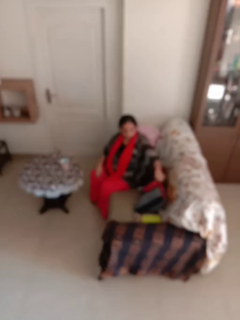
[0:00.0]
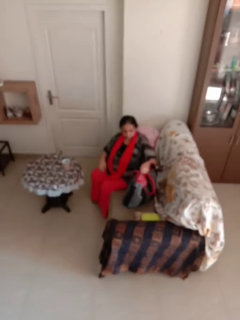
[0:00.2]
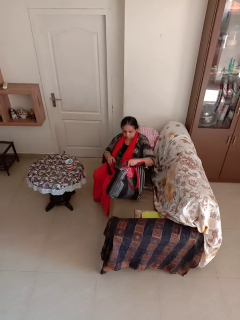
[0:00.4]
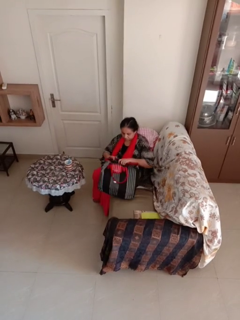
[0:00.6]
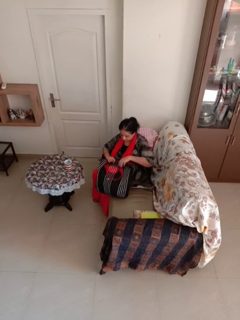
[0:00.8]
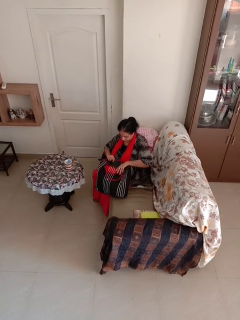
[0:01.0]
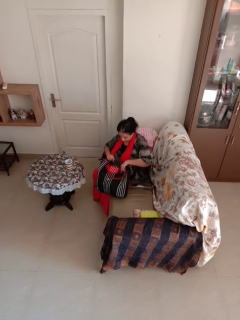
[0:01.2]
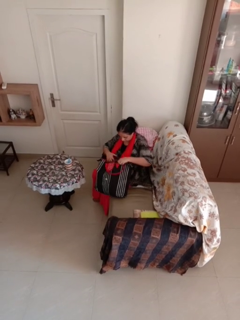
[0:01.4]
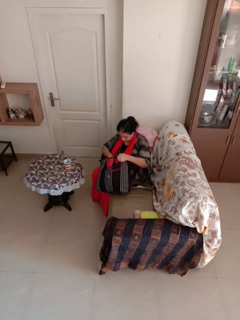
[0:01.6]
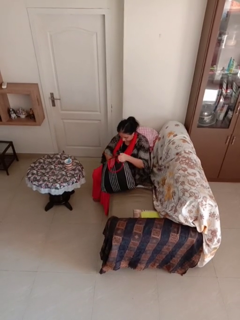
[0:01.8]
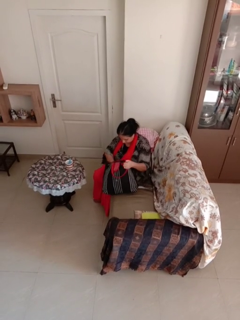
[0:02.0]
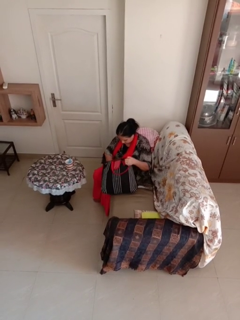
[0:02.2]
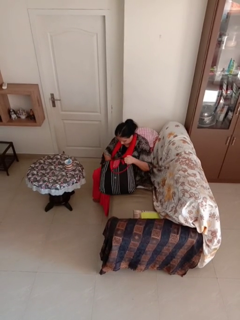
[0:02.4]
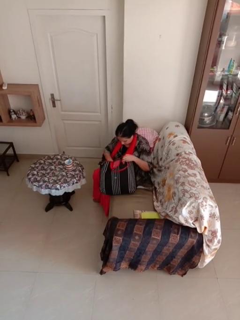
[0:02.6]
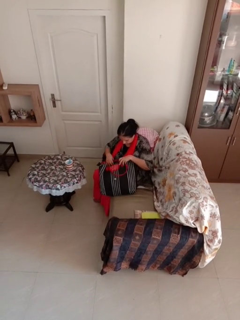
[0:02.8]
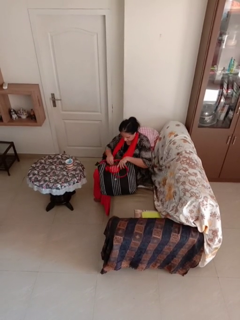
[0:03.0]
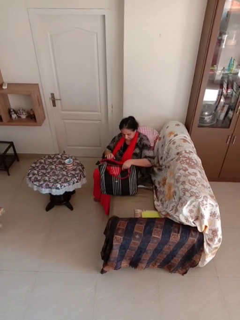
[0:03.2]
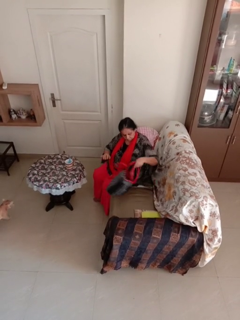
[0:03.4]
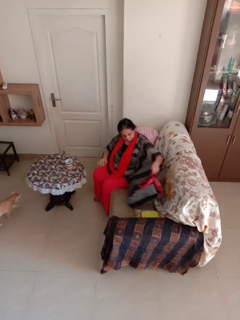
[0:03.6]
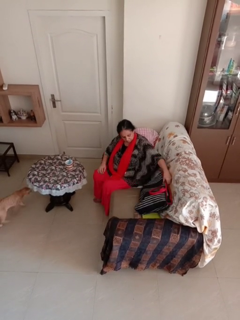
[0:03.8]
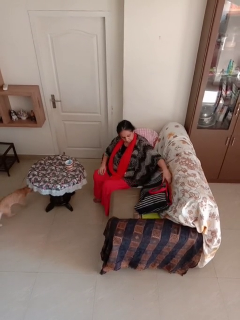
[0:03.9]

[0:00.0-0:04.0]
person searches in bag

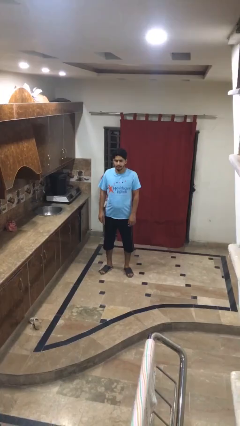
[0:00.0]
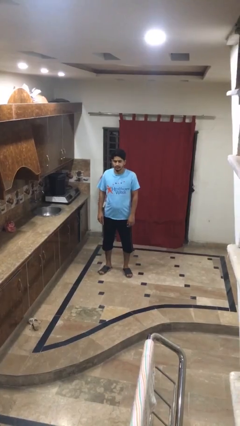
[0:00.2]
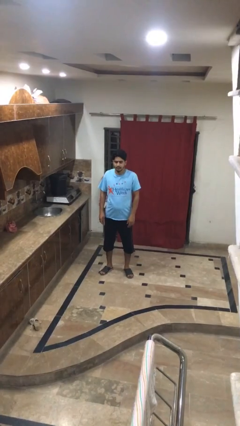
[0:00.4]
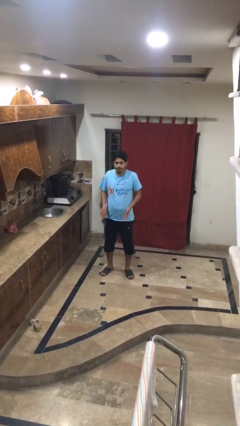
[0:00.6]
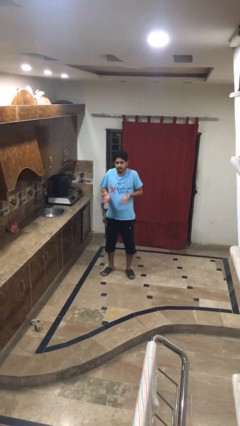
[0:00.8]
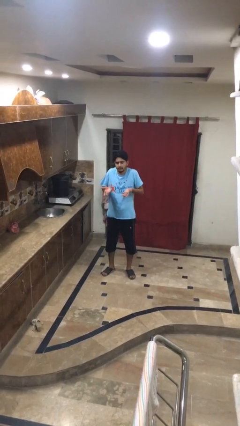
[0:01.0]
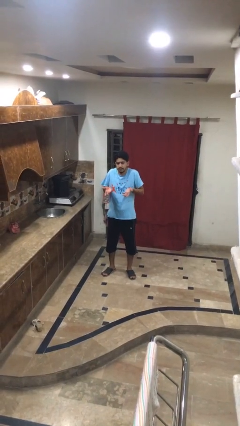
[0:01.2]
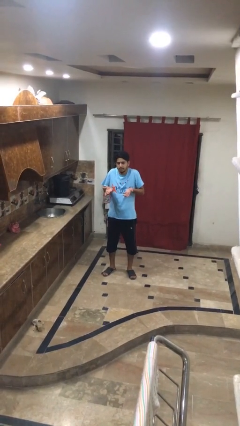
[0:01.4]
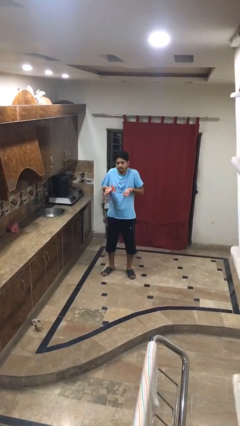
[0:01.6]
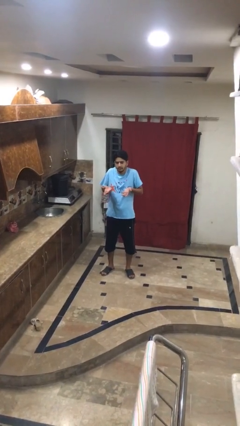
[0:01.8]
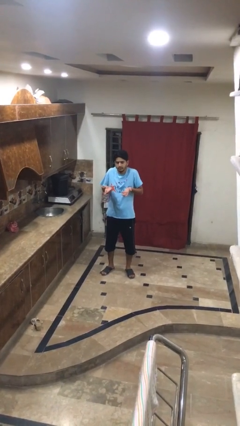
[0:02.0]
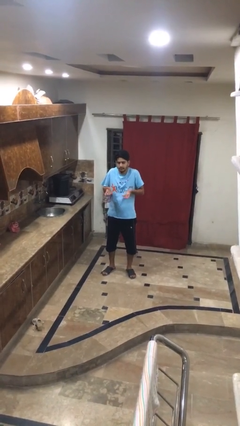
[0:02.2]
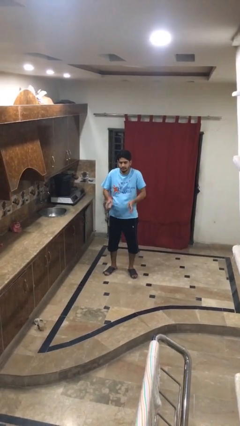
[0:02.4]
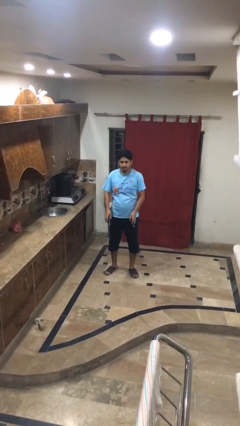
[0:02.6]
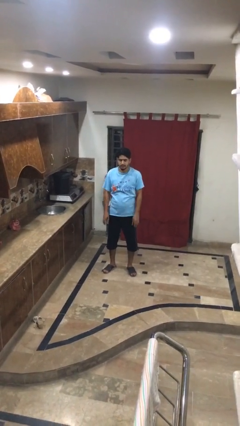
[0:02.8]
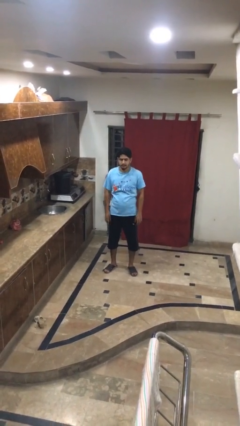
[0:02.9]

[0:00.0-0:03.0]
person shrugs

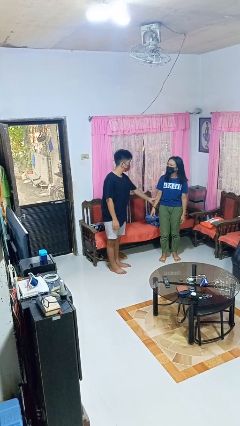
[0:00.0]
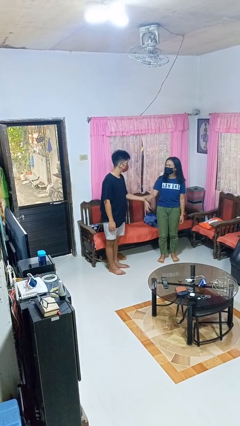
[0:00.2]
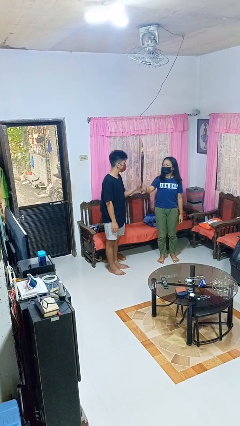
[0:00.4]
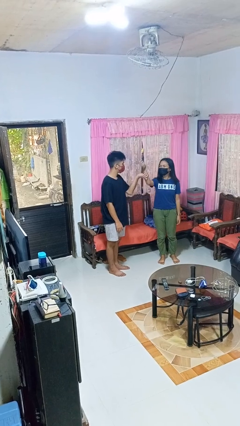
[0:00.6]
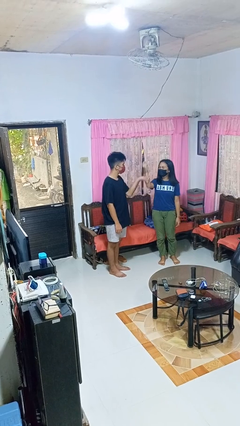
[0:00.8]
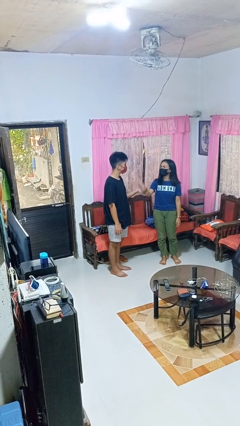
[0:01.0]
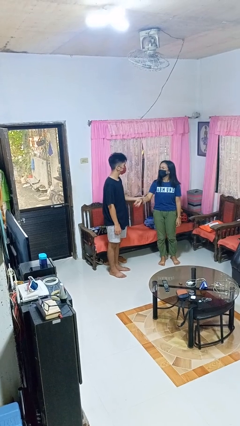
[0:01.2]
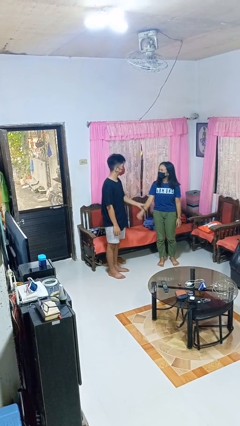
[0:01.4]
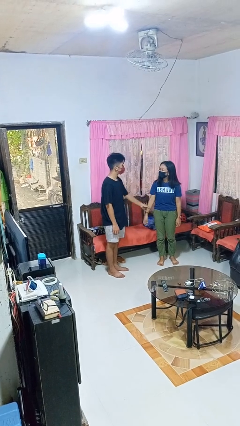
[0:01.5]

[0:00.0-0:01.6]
person grabs person by forearm

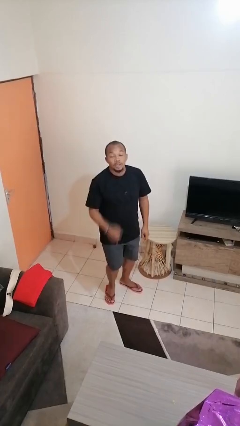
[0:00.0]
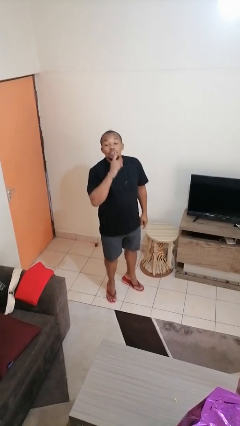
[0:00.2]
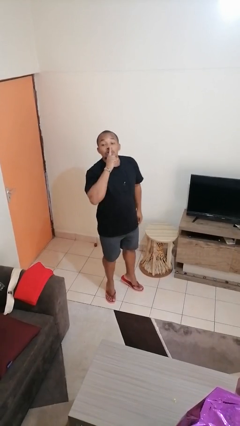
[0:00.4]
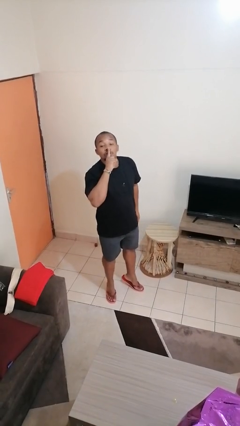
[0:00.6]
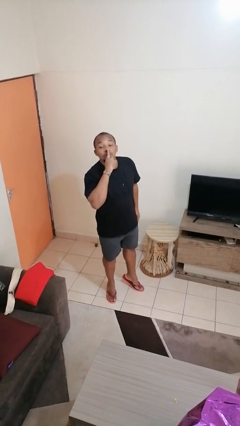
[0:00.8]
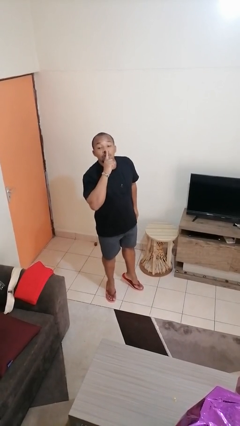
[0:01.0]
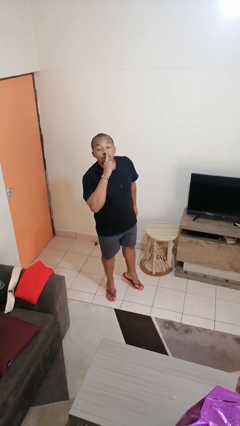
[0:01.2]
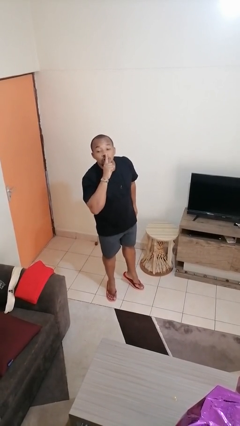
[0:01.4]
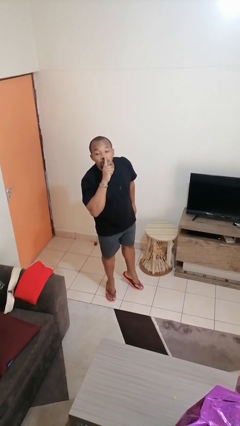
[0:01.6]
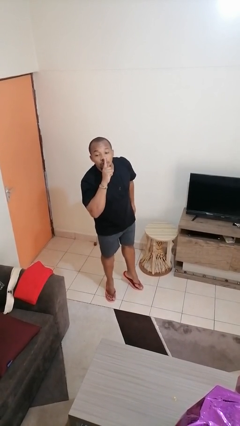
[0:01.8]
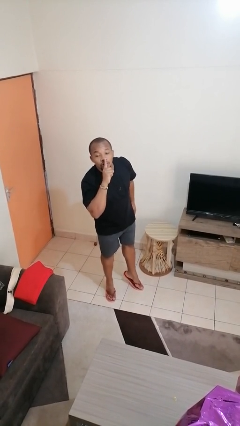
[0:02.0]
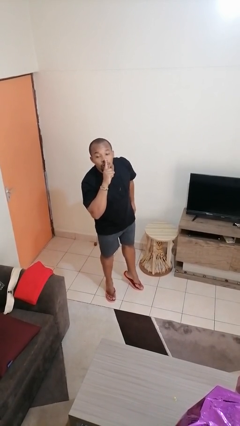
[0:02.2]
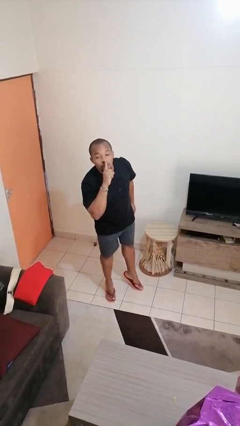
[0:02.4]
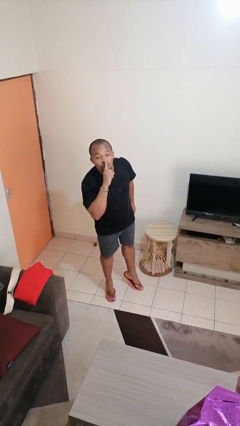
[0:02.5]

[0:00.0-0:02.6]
person gestures be quiet

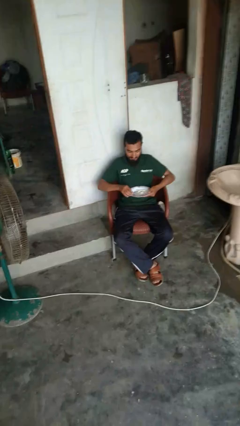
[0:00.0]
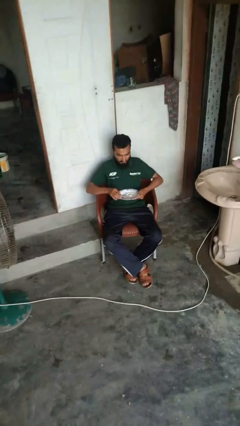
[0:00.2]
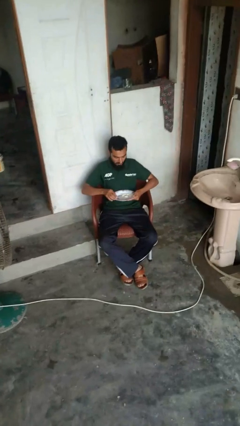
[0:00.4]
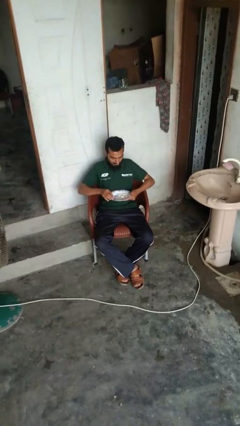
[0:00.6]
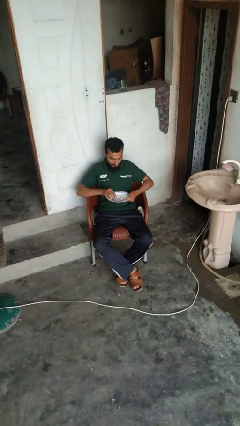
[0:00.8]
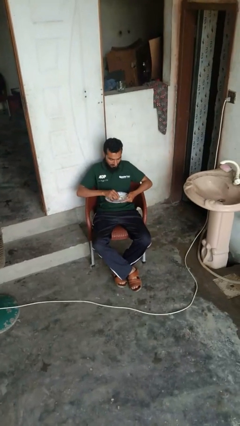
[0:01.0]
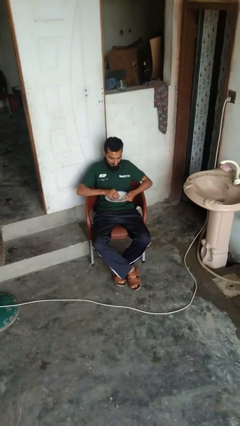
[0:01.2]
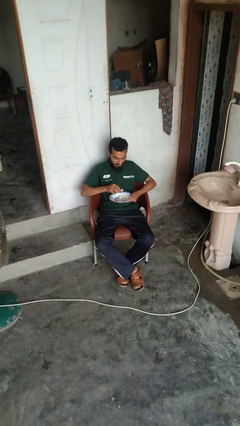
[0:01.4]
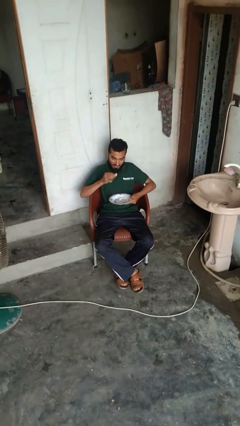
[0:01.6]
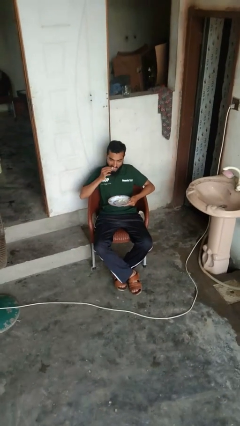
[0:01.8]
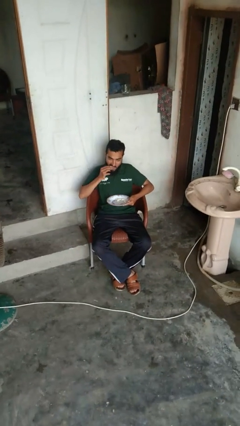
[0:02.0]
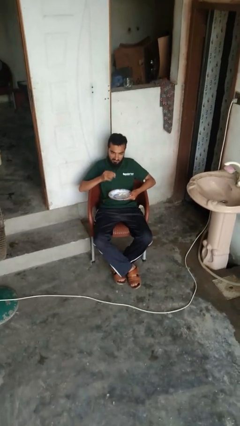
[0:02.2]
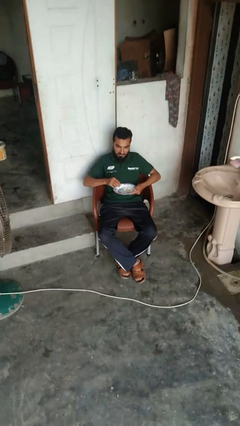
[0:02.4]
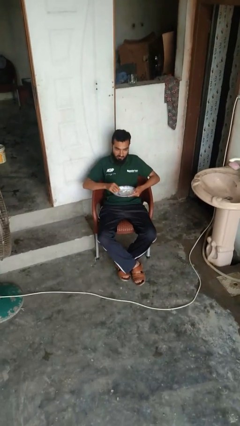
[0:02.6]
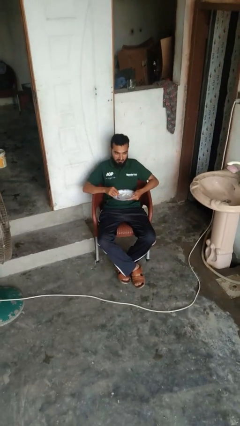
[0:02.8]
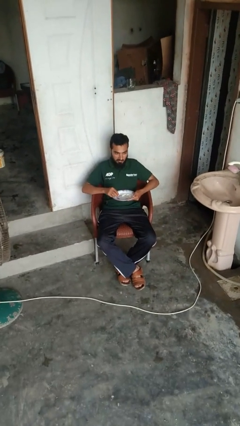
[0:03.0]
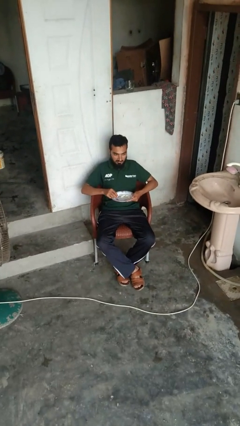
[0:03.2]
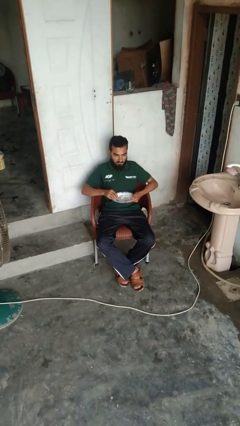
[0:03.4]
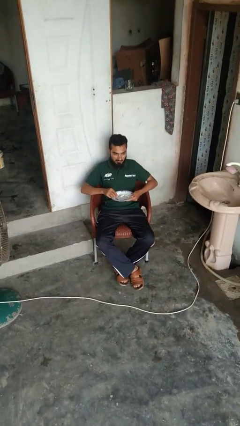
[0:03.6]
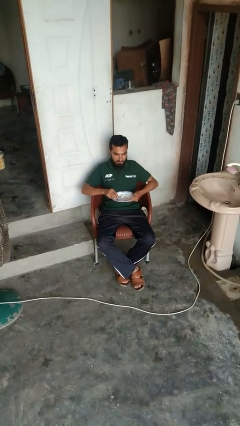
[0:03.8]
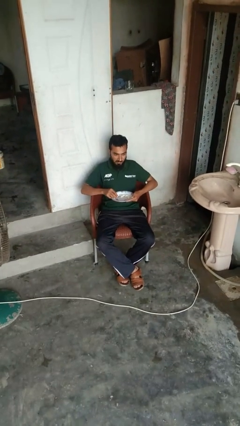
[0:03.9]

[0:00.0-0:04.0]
person eats with hands

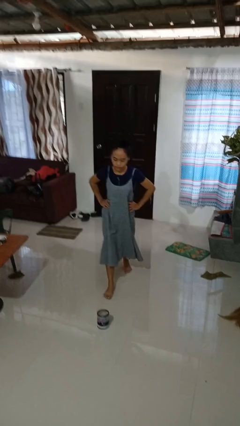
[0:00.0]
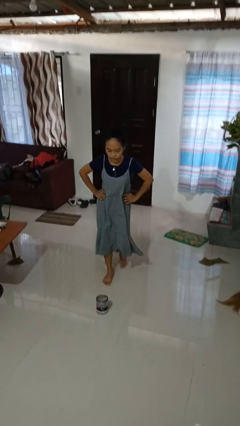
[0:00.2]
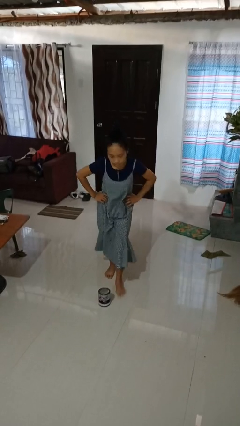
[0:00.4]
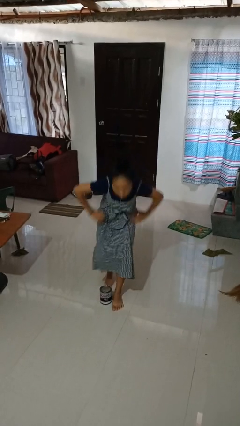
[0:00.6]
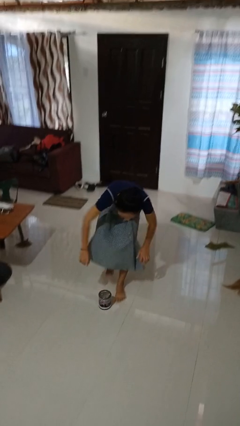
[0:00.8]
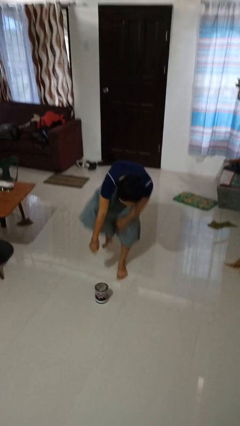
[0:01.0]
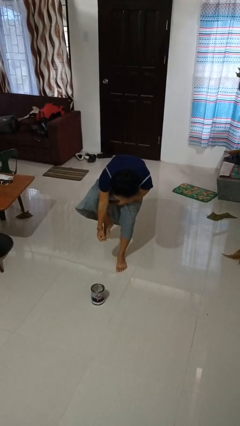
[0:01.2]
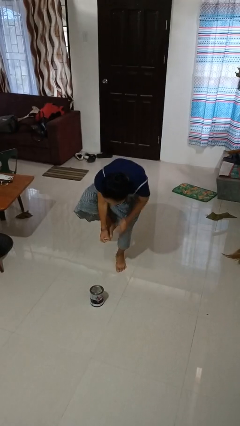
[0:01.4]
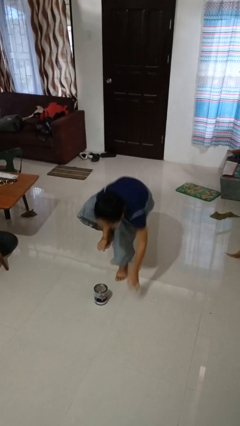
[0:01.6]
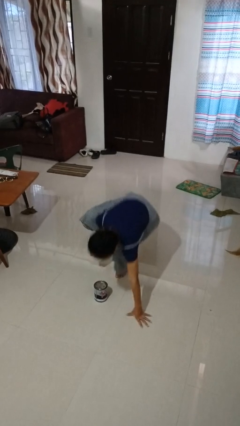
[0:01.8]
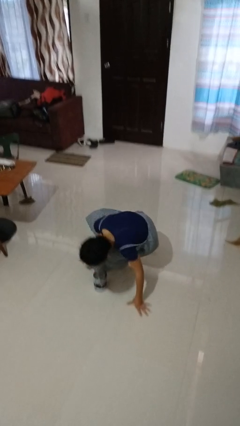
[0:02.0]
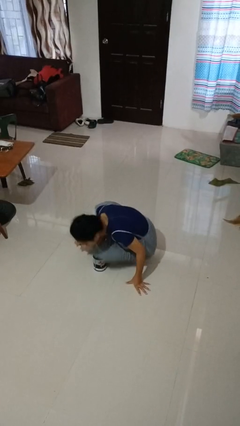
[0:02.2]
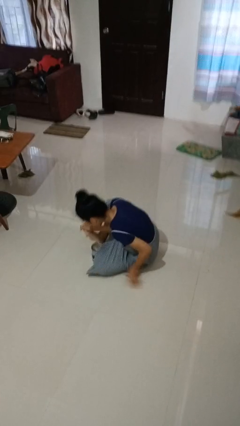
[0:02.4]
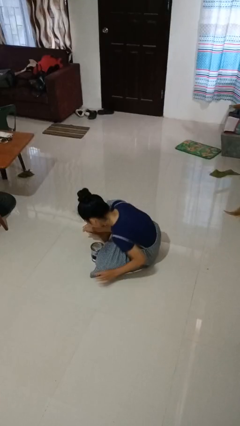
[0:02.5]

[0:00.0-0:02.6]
person trips on object on floor

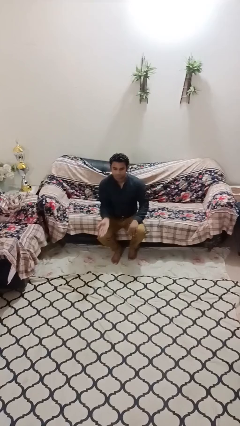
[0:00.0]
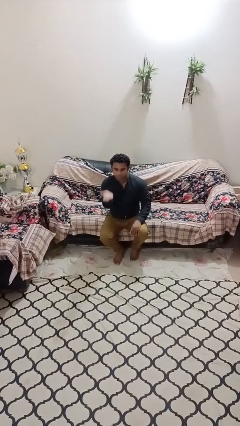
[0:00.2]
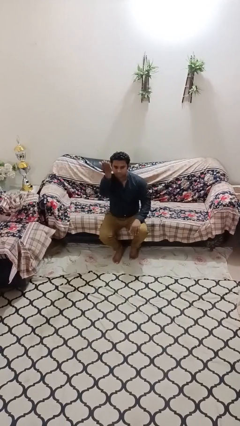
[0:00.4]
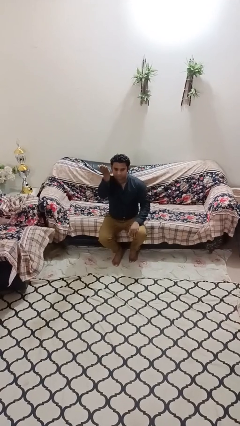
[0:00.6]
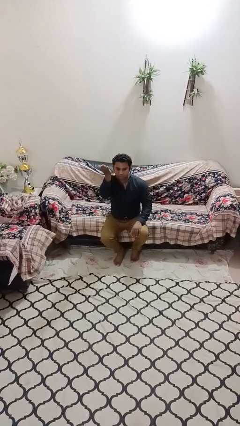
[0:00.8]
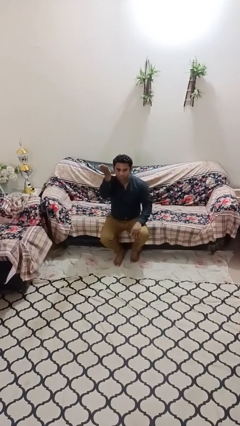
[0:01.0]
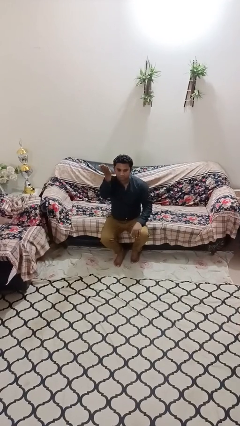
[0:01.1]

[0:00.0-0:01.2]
person gestures swipe up
